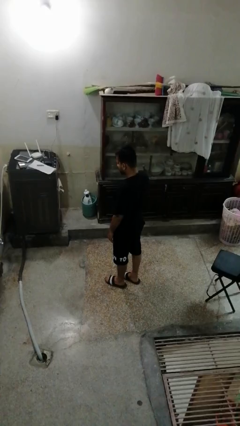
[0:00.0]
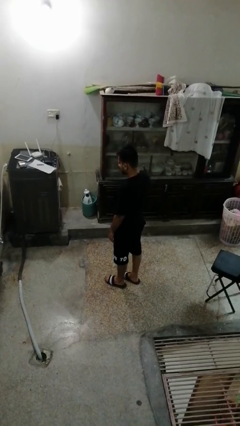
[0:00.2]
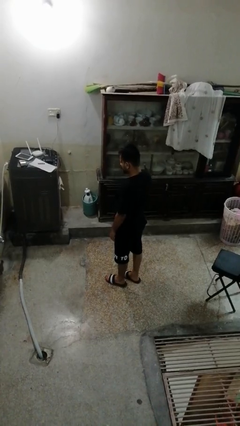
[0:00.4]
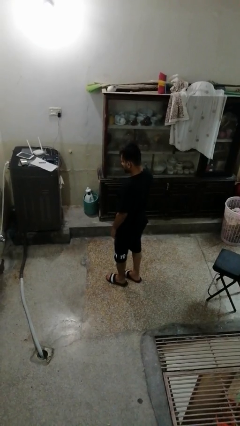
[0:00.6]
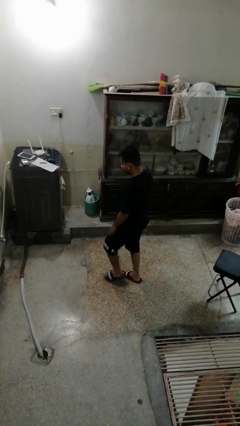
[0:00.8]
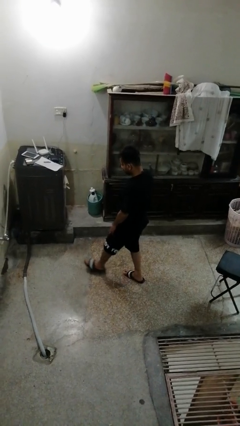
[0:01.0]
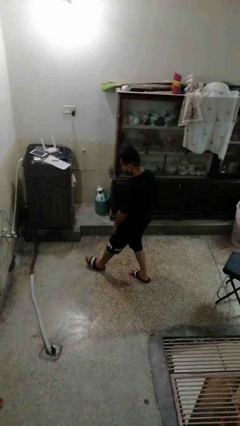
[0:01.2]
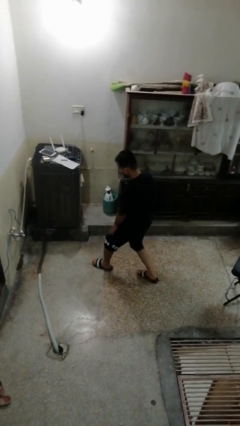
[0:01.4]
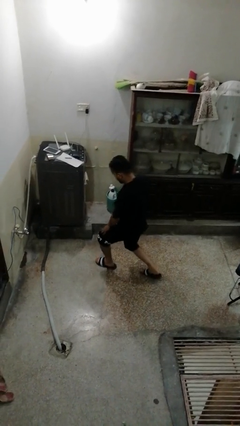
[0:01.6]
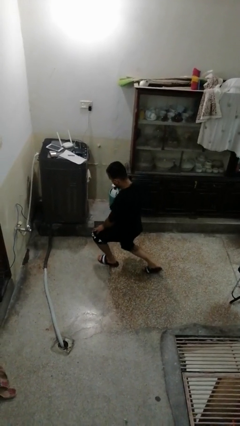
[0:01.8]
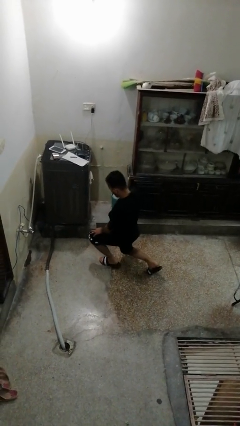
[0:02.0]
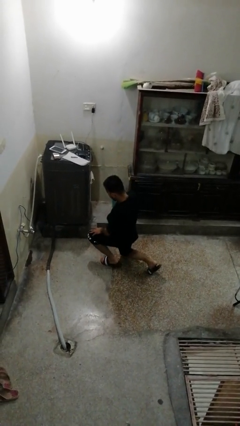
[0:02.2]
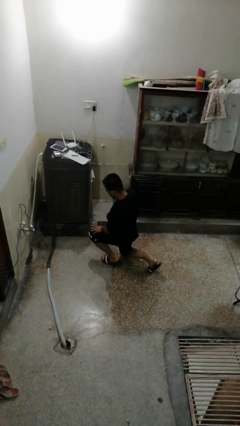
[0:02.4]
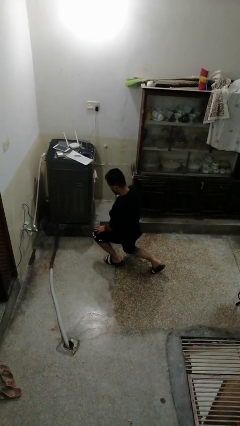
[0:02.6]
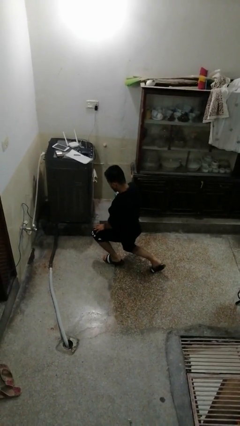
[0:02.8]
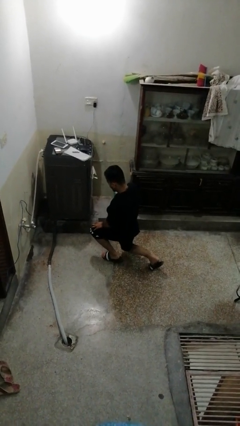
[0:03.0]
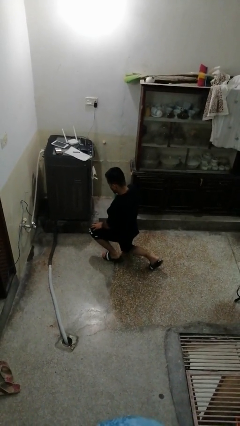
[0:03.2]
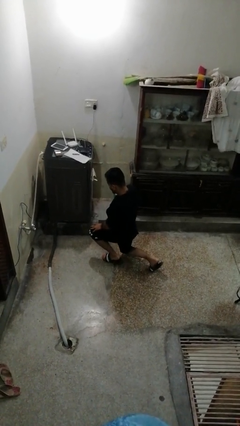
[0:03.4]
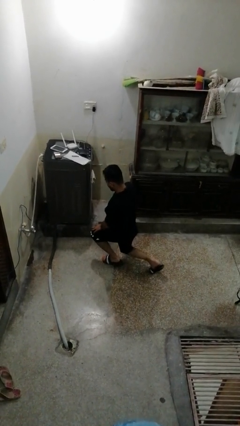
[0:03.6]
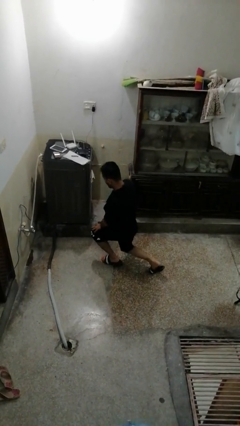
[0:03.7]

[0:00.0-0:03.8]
person exercises with lunges

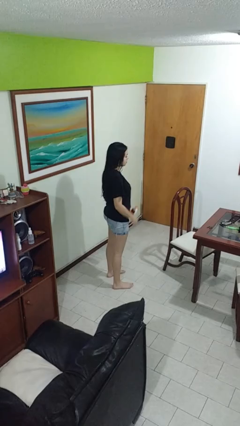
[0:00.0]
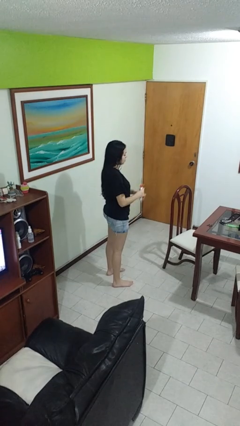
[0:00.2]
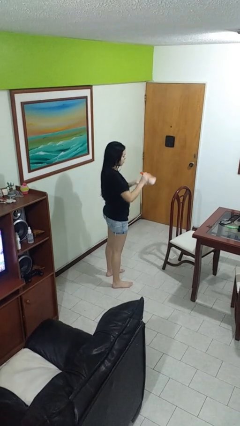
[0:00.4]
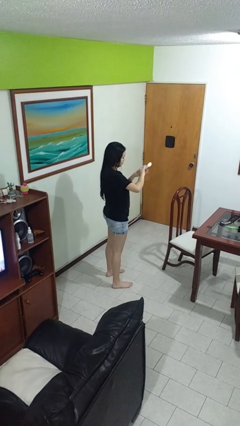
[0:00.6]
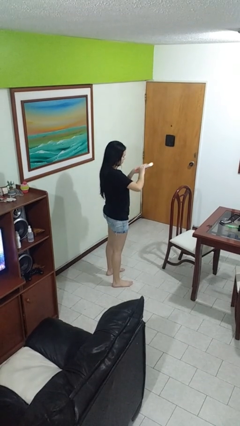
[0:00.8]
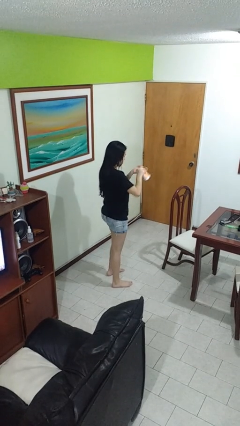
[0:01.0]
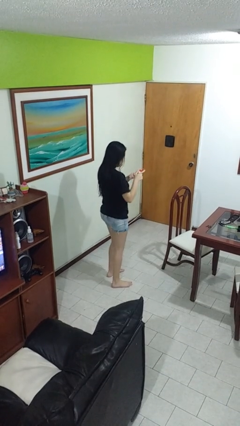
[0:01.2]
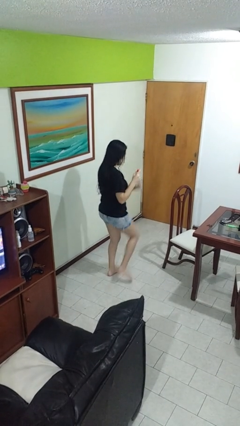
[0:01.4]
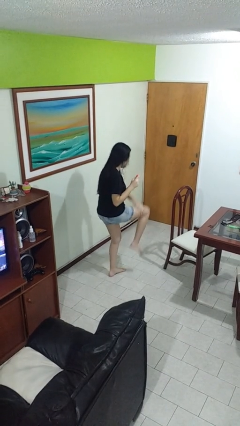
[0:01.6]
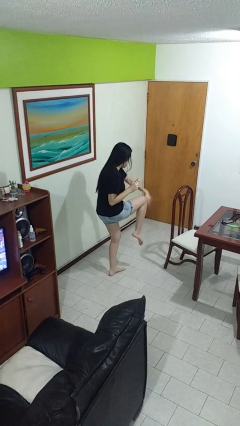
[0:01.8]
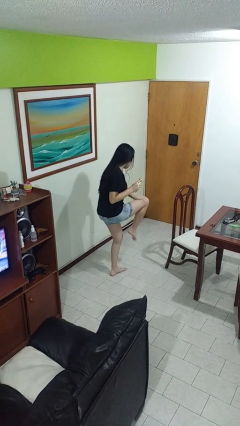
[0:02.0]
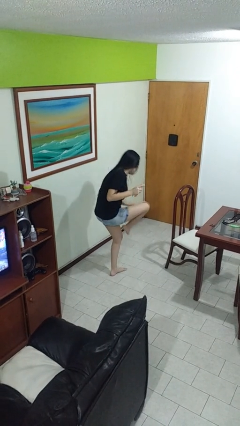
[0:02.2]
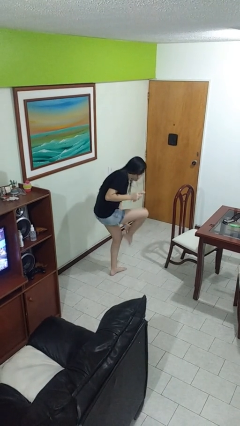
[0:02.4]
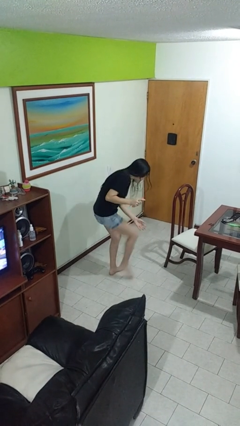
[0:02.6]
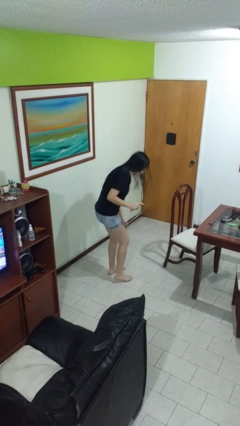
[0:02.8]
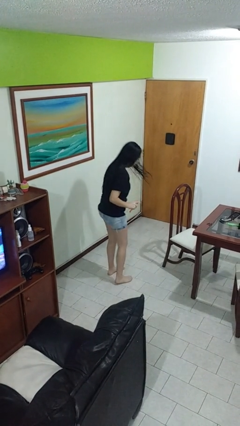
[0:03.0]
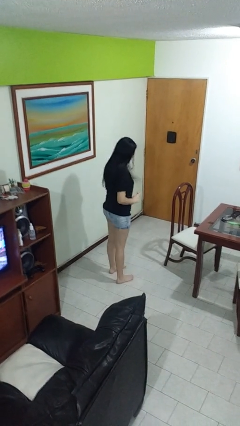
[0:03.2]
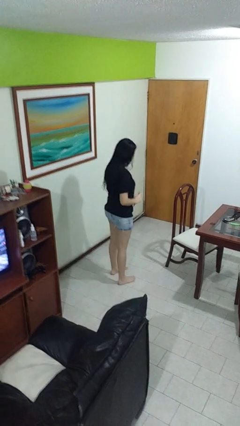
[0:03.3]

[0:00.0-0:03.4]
person applies sunscreen

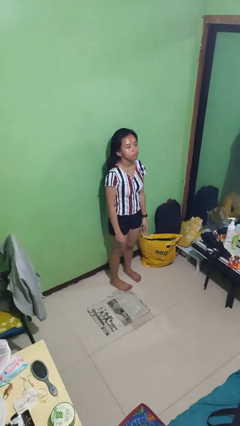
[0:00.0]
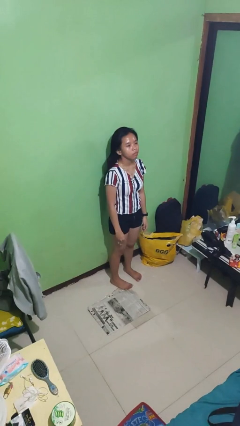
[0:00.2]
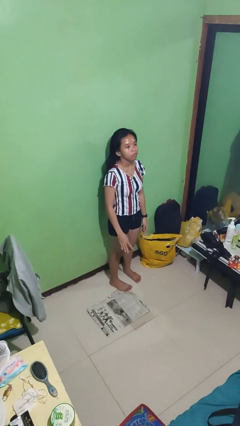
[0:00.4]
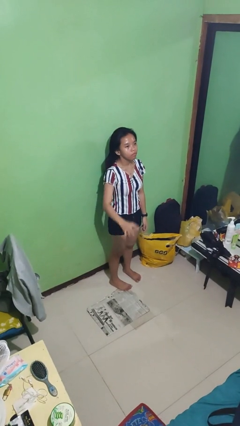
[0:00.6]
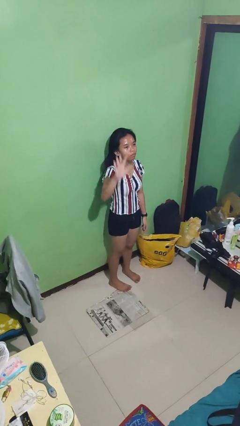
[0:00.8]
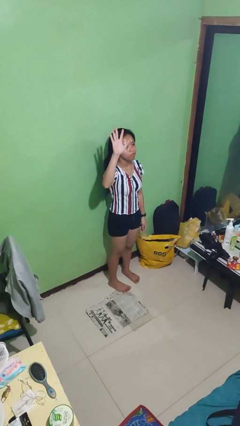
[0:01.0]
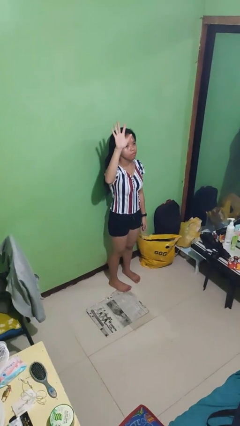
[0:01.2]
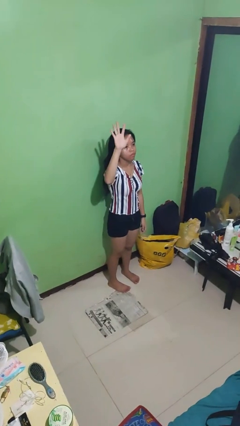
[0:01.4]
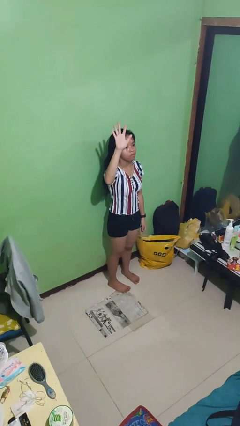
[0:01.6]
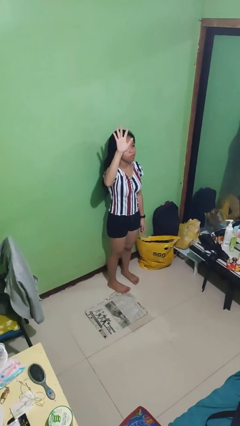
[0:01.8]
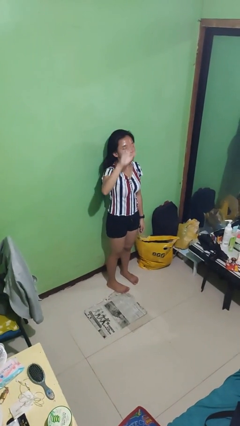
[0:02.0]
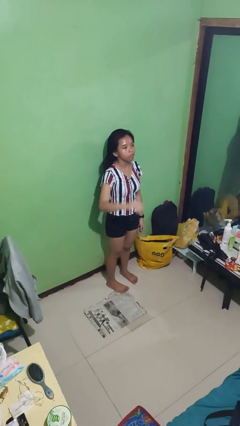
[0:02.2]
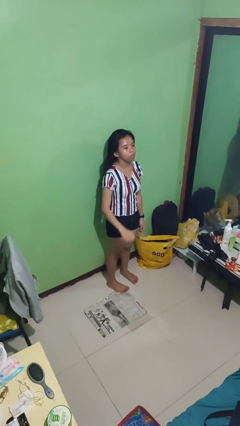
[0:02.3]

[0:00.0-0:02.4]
person gestures number five

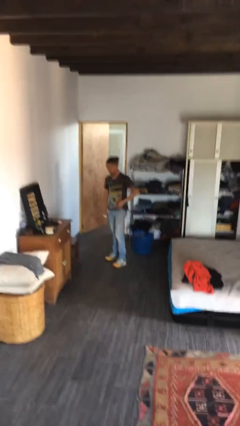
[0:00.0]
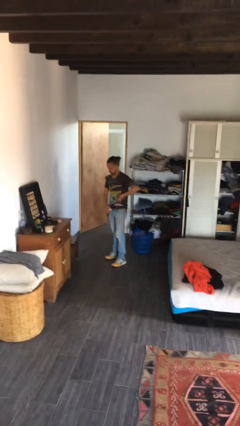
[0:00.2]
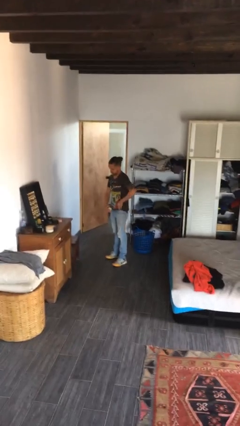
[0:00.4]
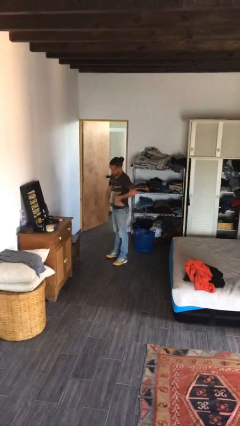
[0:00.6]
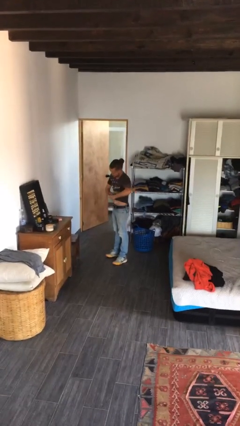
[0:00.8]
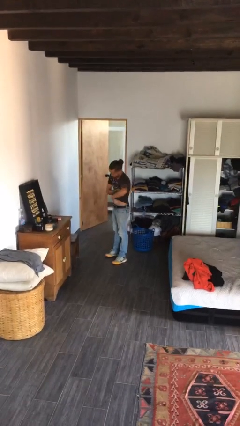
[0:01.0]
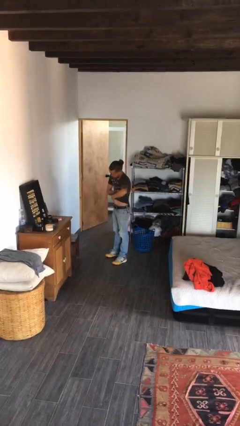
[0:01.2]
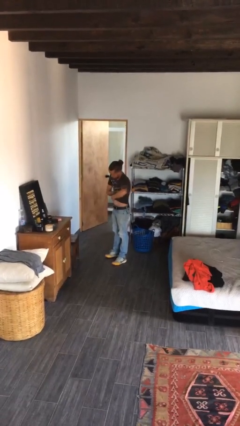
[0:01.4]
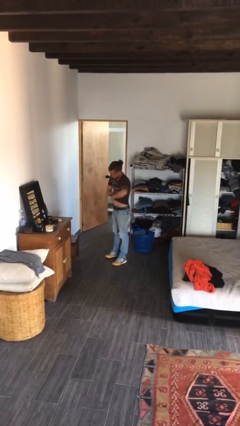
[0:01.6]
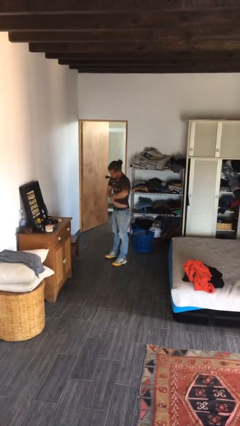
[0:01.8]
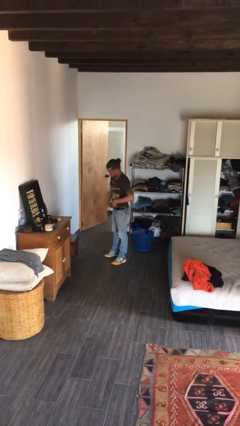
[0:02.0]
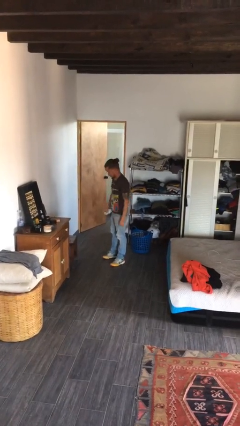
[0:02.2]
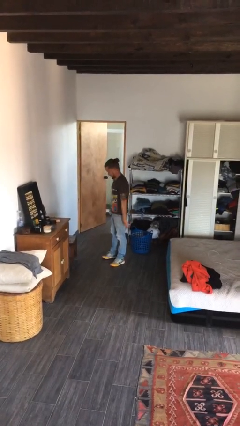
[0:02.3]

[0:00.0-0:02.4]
person applies deodorant

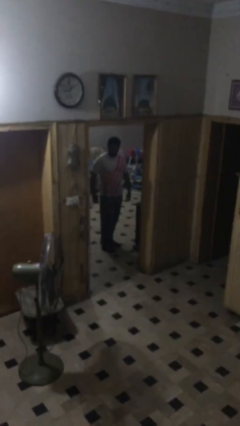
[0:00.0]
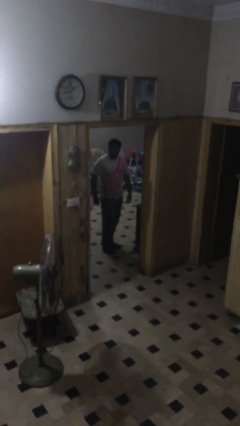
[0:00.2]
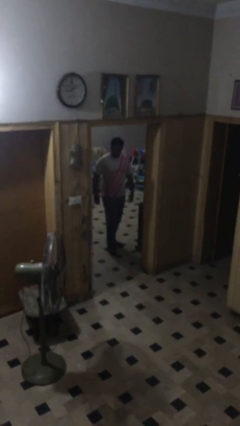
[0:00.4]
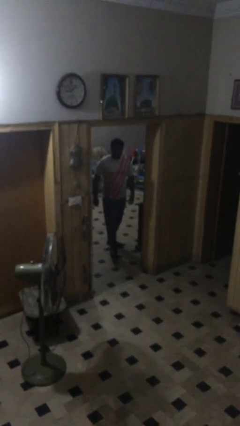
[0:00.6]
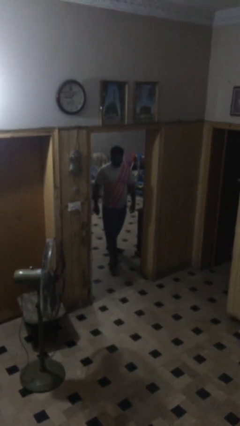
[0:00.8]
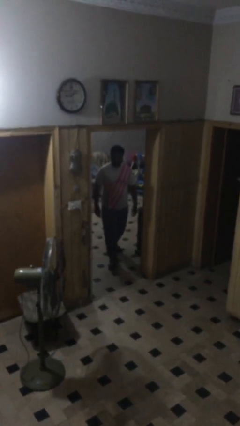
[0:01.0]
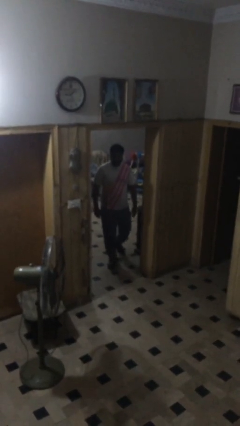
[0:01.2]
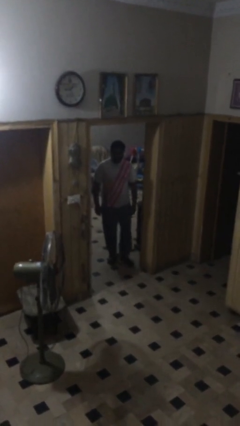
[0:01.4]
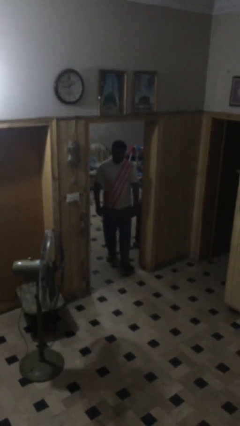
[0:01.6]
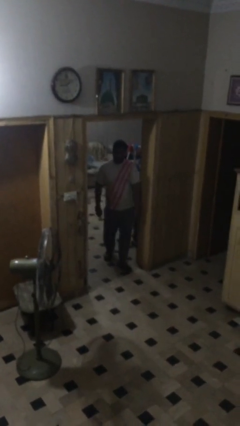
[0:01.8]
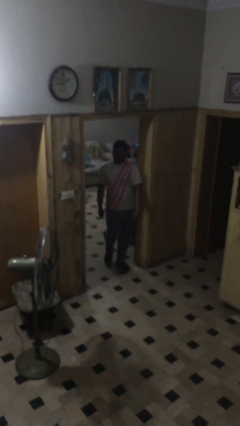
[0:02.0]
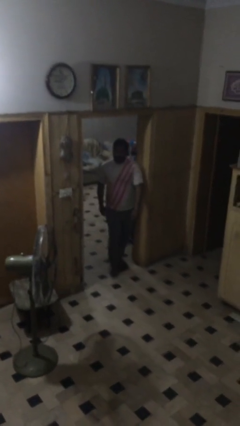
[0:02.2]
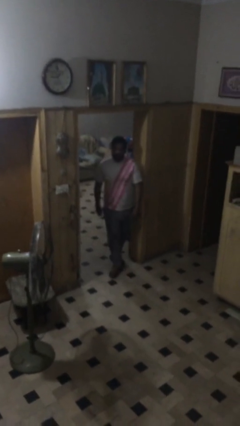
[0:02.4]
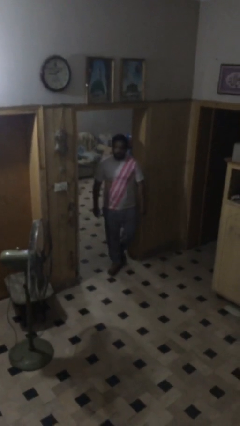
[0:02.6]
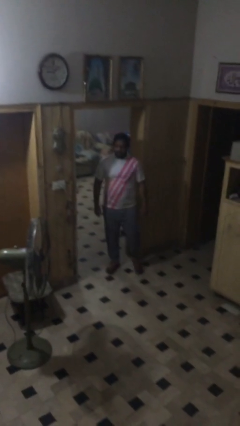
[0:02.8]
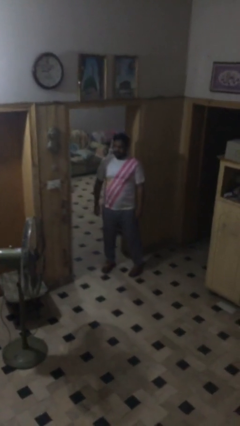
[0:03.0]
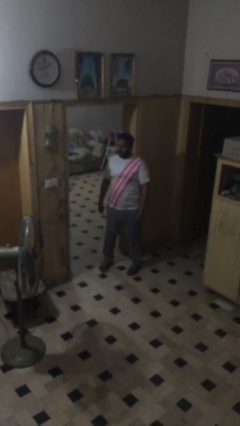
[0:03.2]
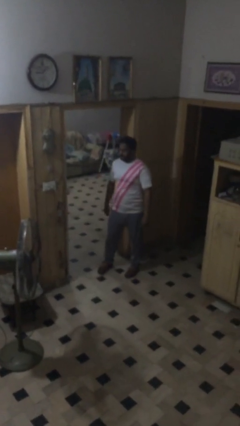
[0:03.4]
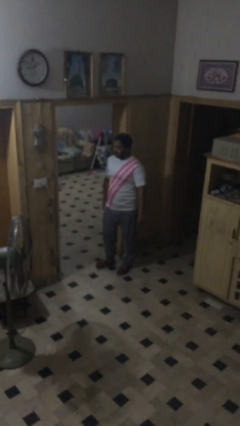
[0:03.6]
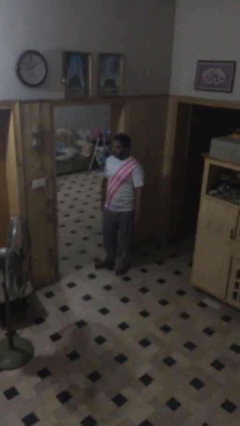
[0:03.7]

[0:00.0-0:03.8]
person enters scene through structure

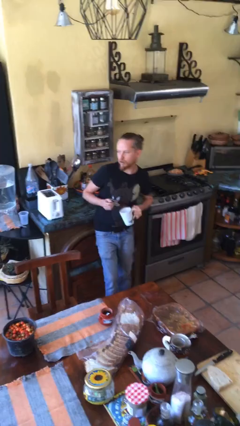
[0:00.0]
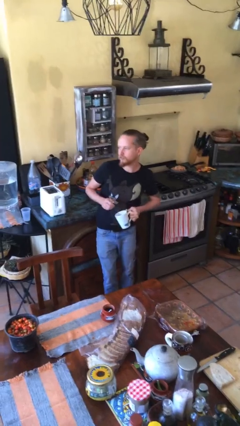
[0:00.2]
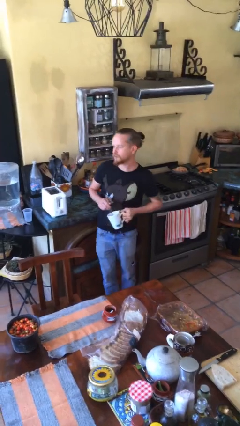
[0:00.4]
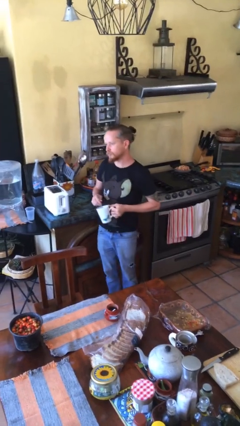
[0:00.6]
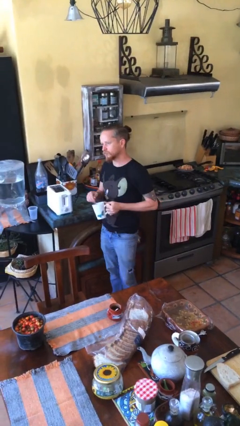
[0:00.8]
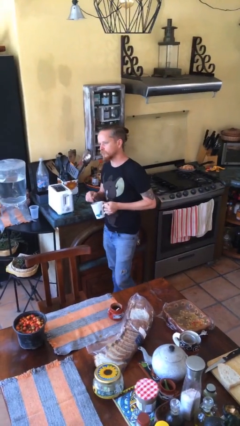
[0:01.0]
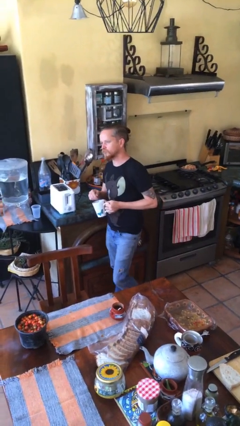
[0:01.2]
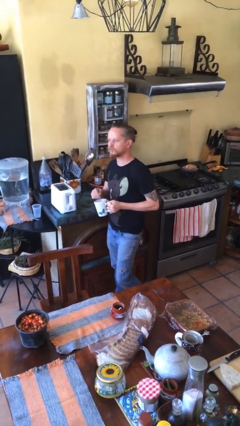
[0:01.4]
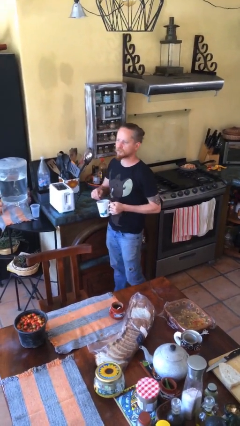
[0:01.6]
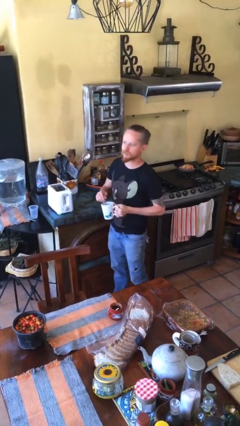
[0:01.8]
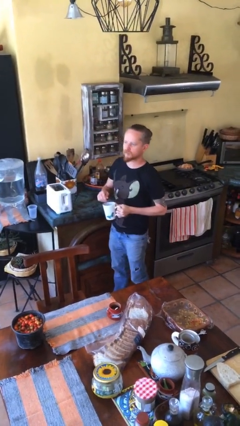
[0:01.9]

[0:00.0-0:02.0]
person stirs mug
